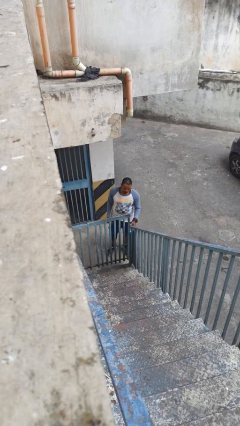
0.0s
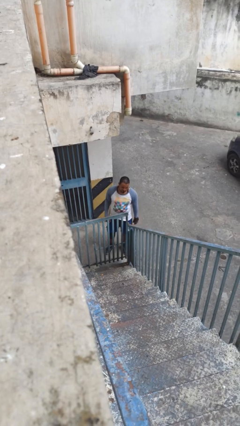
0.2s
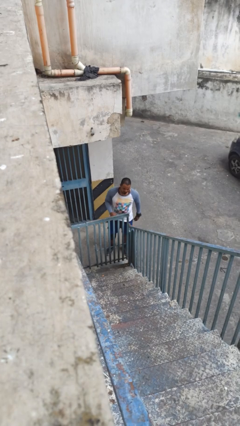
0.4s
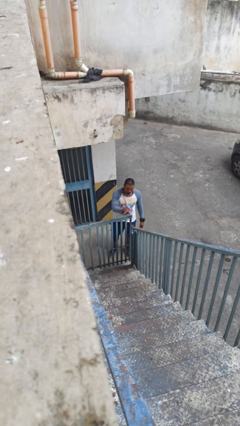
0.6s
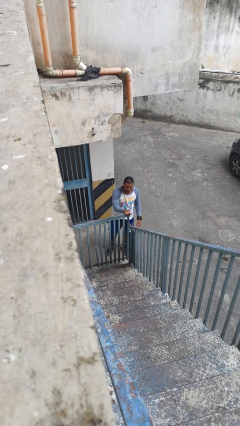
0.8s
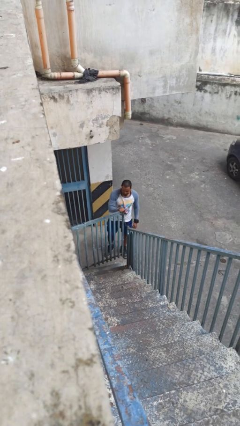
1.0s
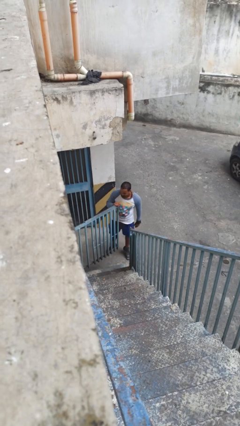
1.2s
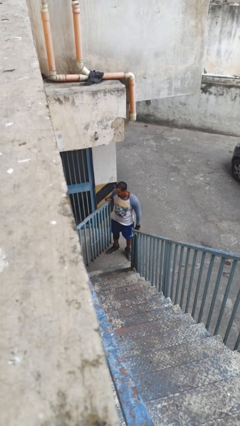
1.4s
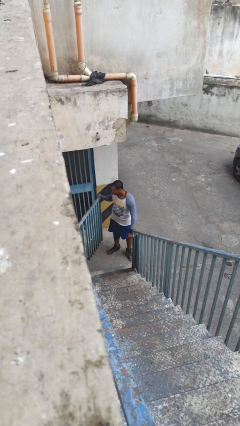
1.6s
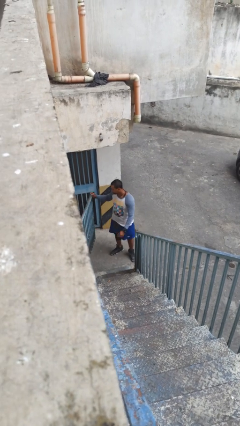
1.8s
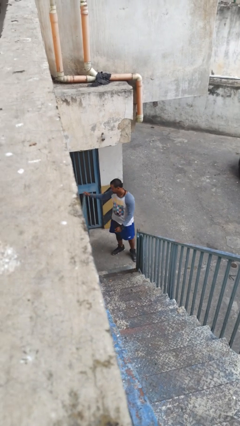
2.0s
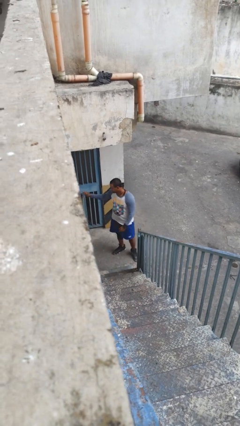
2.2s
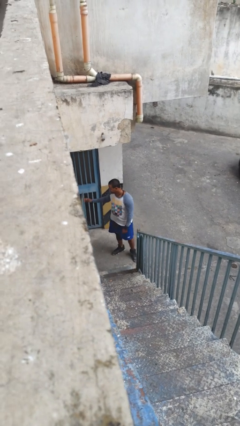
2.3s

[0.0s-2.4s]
person opens facility door

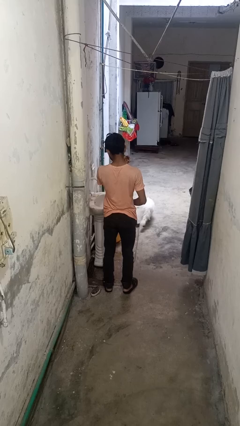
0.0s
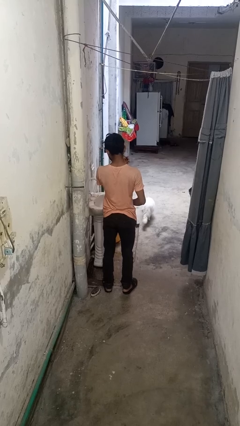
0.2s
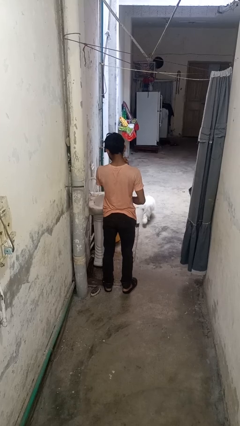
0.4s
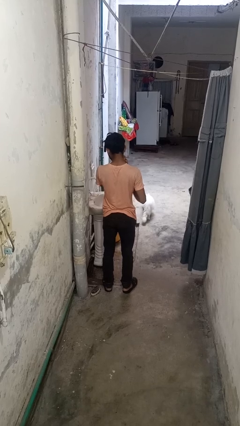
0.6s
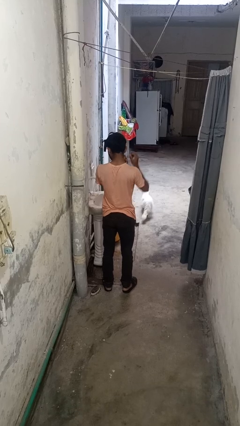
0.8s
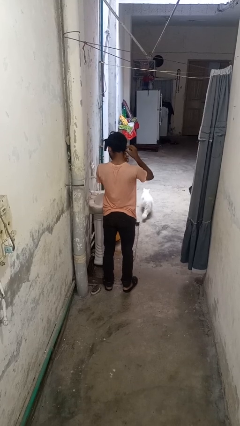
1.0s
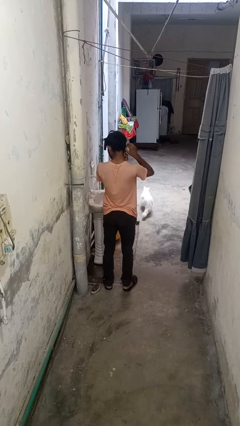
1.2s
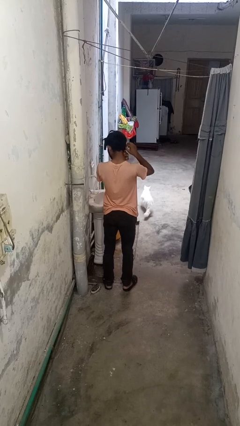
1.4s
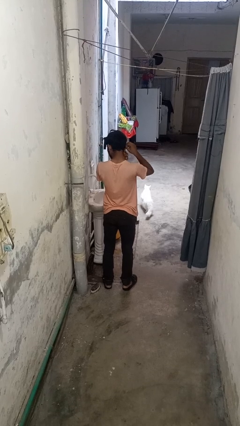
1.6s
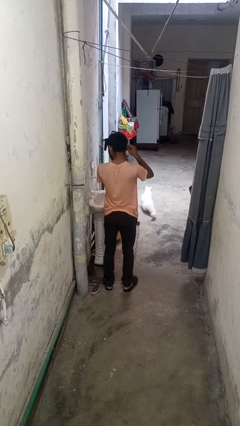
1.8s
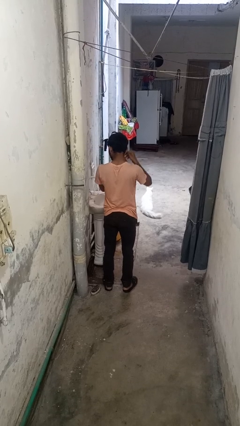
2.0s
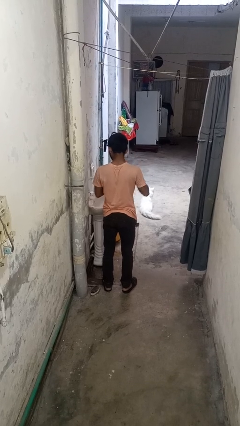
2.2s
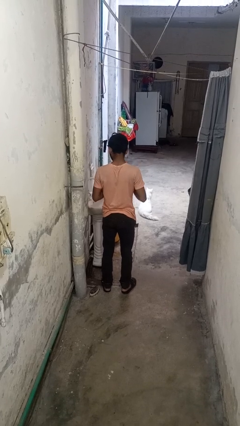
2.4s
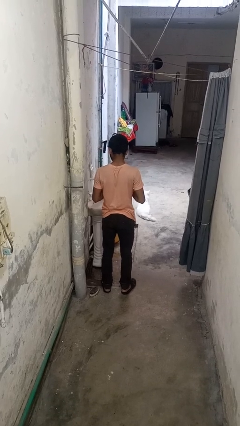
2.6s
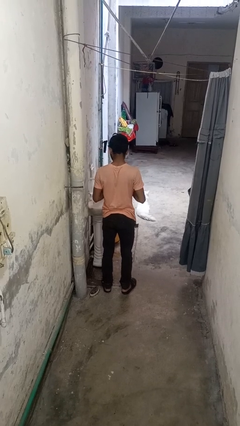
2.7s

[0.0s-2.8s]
person takes off earrings

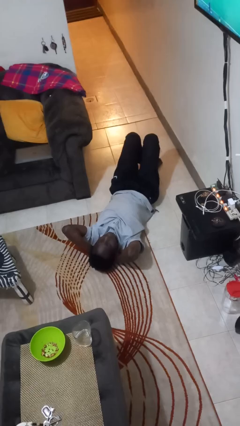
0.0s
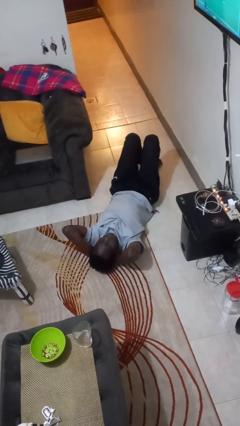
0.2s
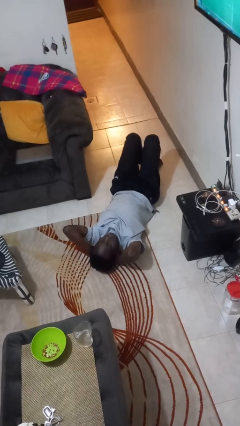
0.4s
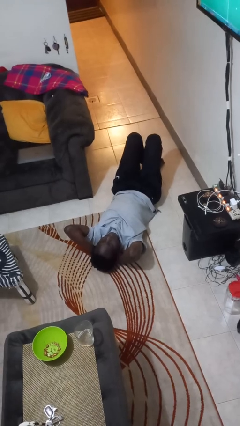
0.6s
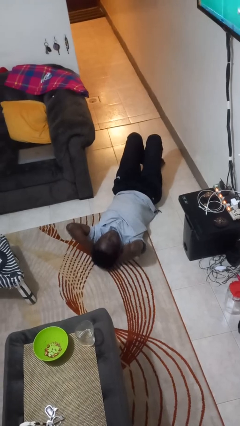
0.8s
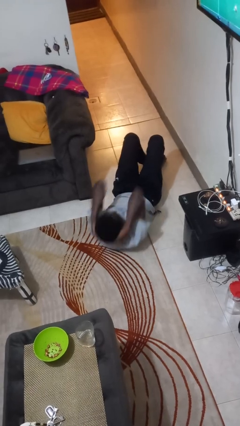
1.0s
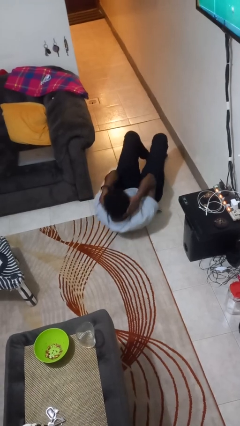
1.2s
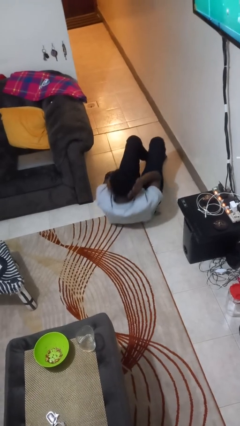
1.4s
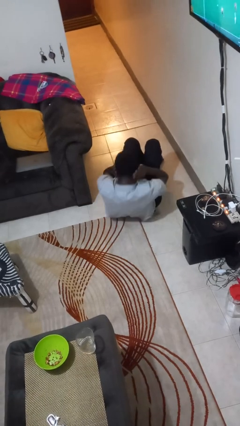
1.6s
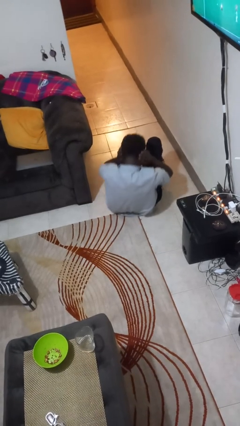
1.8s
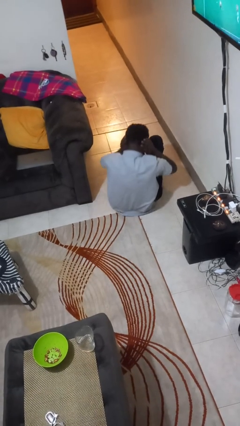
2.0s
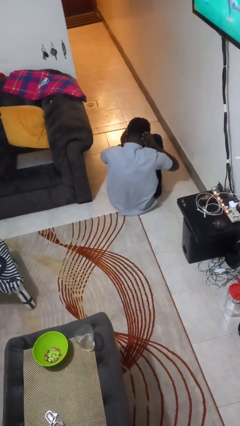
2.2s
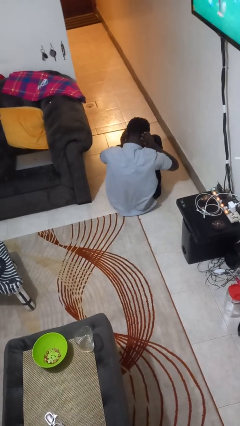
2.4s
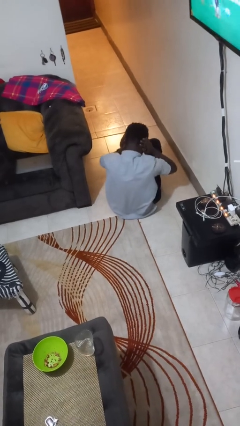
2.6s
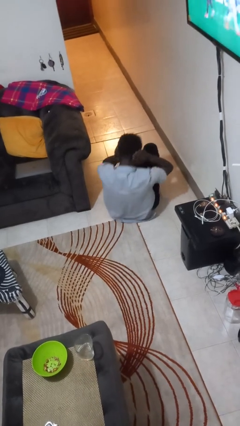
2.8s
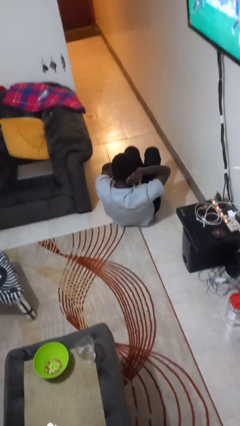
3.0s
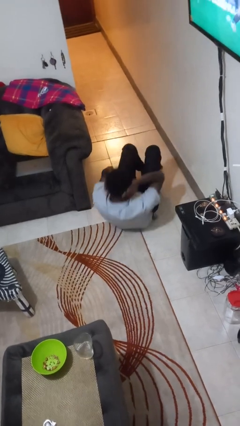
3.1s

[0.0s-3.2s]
person exercises with situp

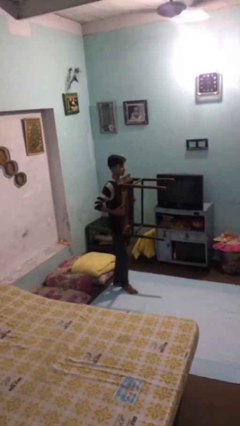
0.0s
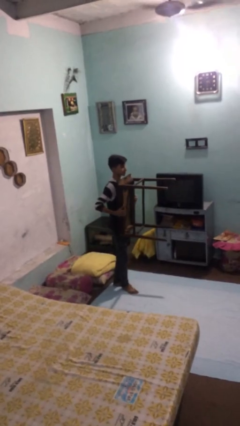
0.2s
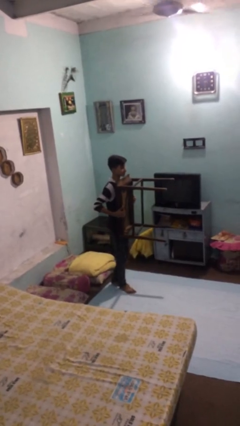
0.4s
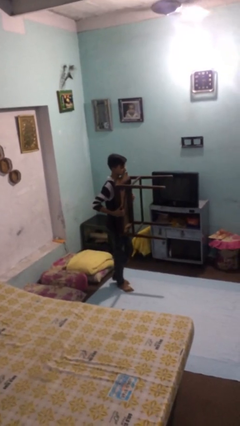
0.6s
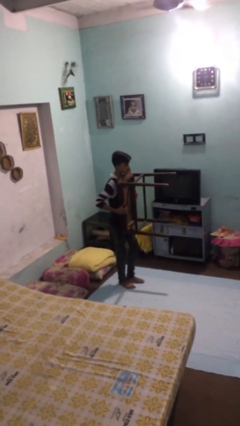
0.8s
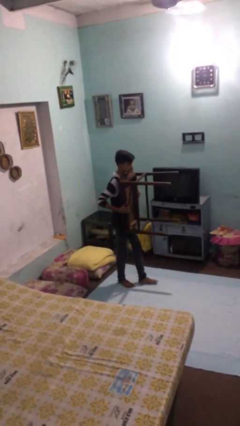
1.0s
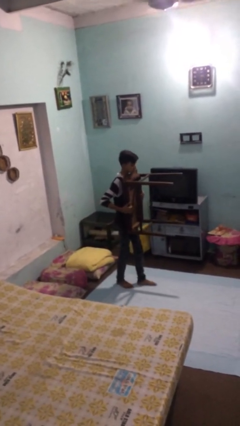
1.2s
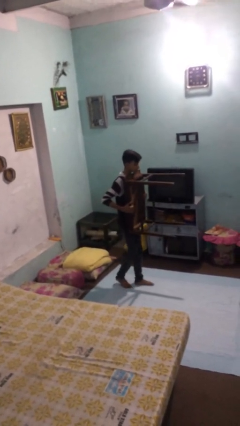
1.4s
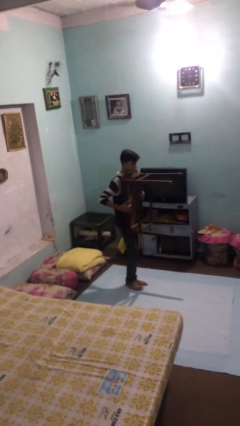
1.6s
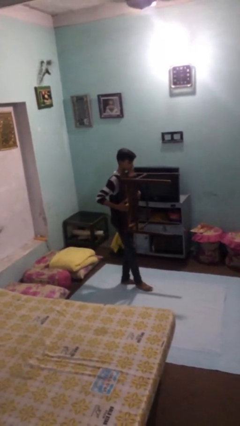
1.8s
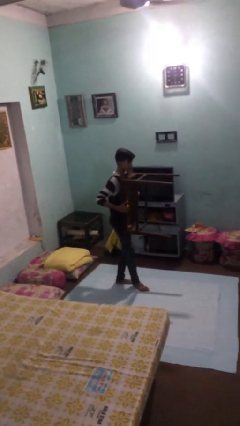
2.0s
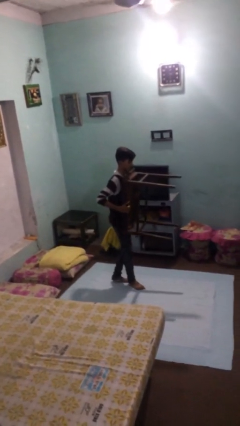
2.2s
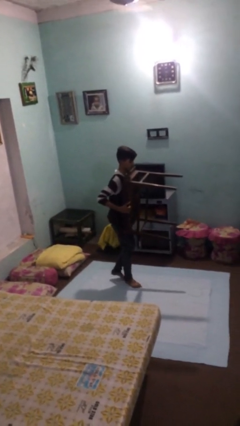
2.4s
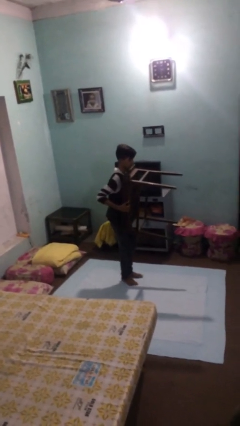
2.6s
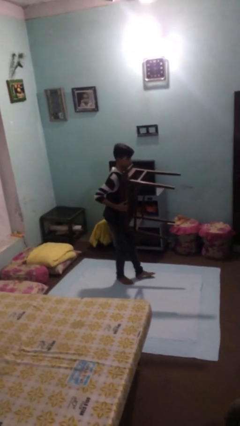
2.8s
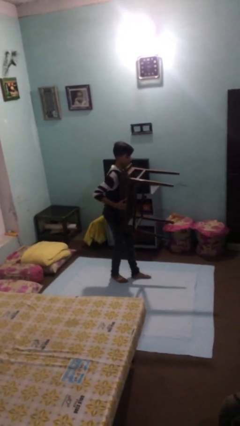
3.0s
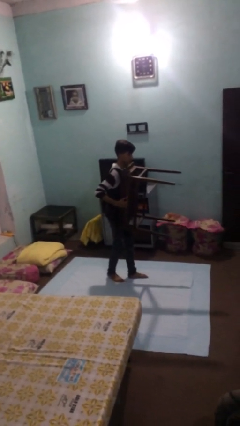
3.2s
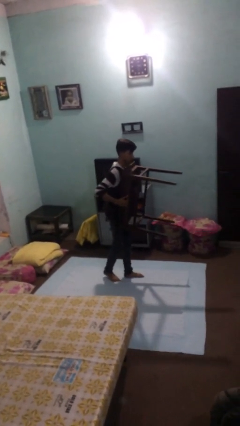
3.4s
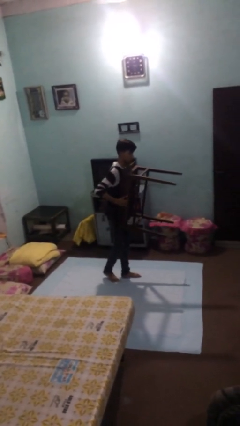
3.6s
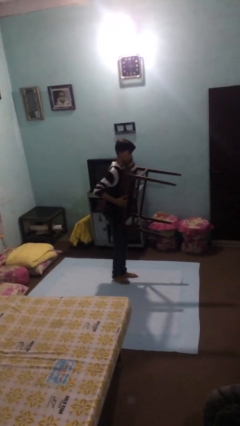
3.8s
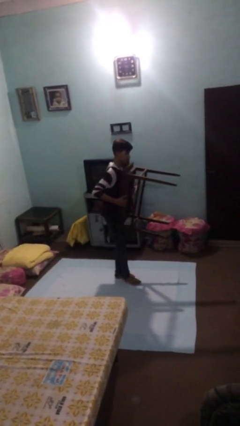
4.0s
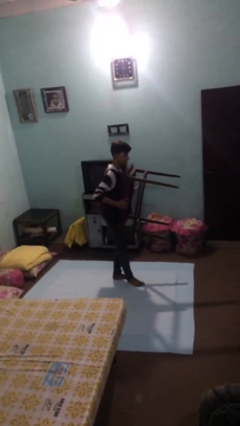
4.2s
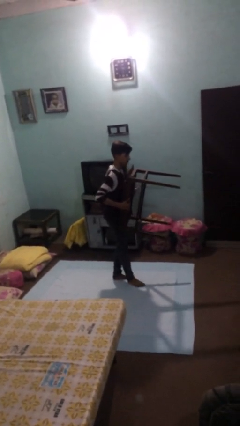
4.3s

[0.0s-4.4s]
person carries heavy object

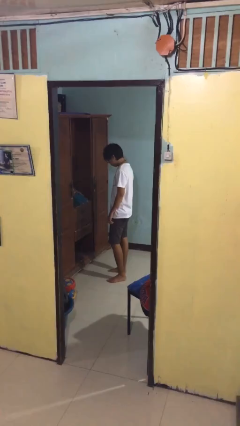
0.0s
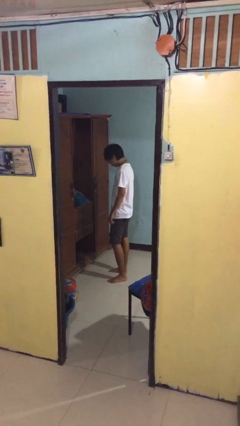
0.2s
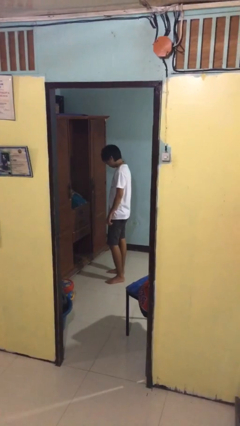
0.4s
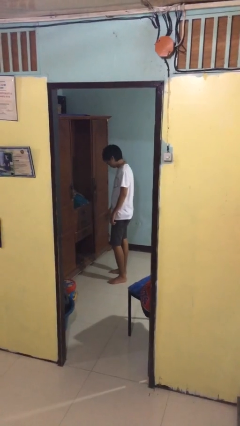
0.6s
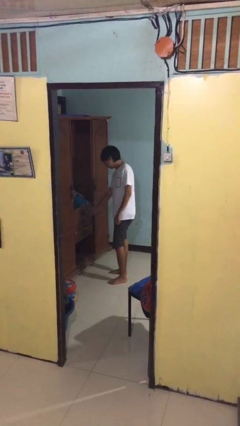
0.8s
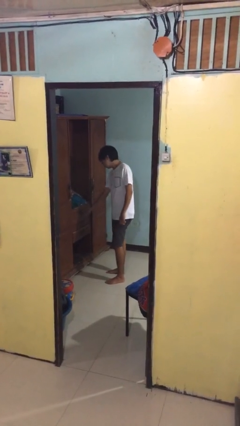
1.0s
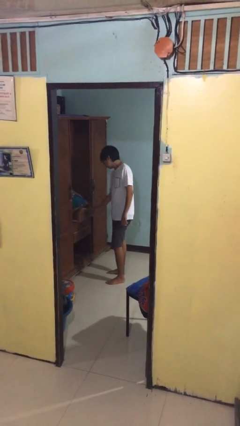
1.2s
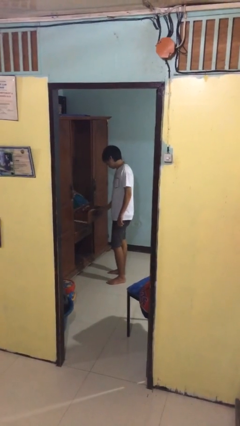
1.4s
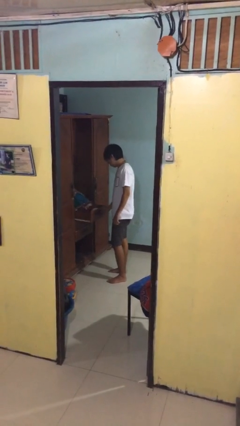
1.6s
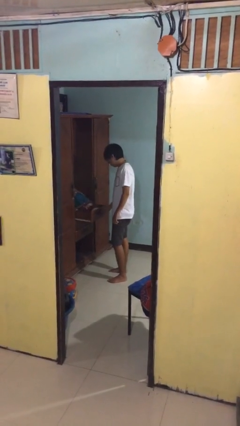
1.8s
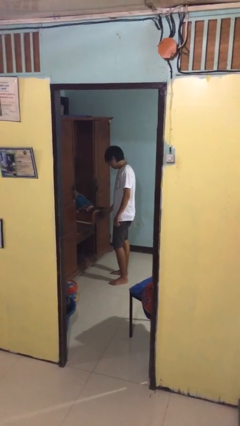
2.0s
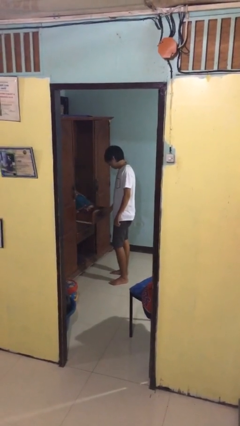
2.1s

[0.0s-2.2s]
person opens dresser drawer

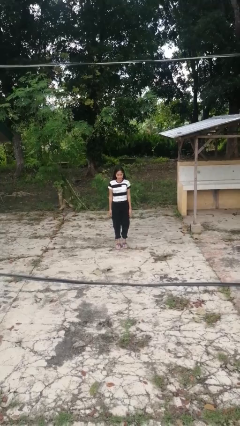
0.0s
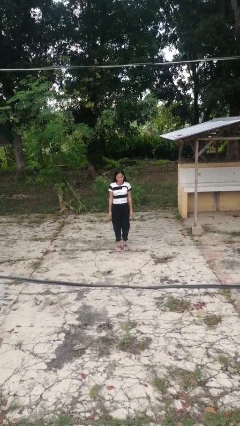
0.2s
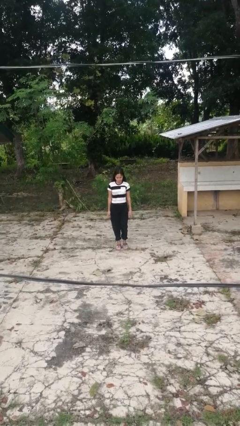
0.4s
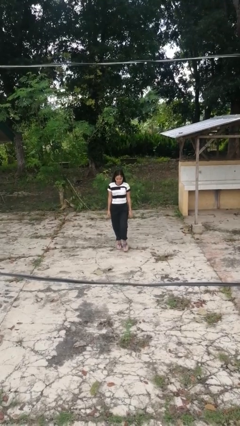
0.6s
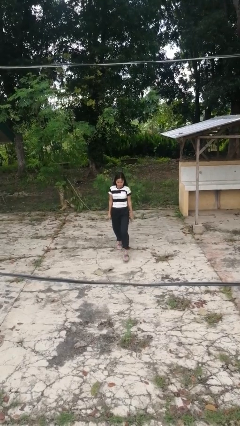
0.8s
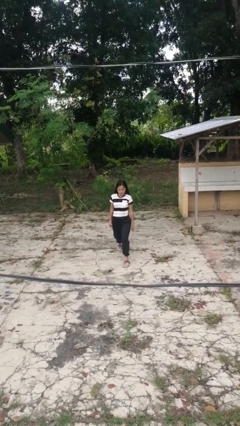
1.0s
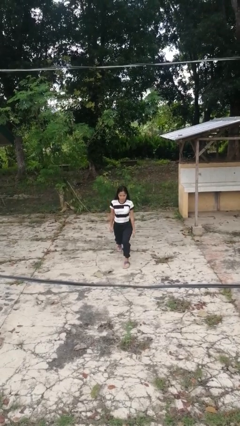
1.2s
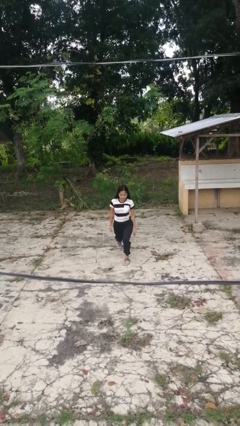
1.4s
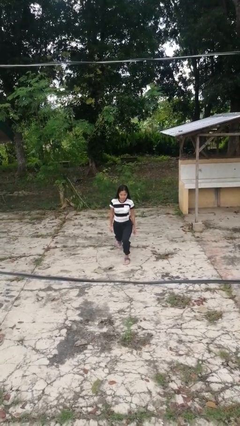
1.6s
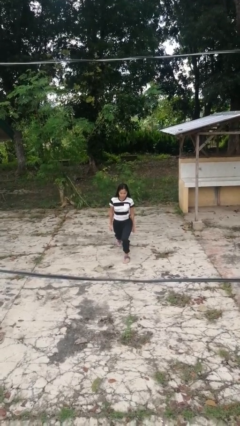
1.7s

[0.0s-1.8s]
person exercises with lunges

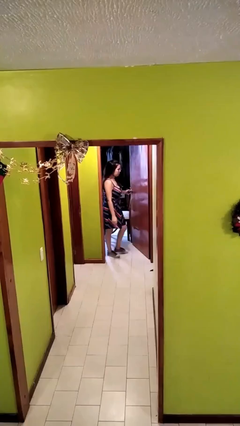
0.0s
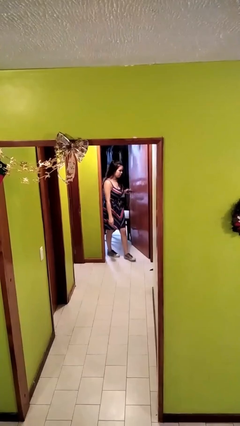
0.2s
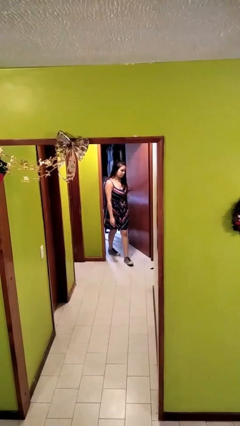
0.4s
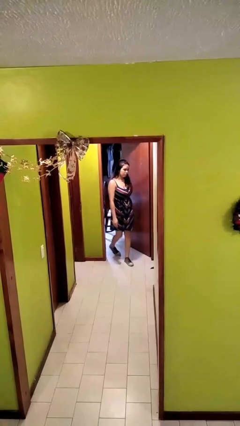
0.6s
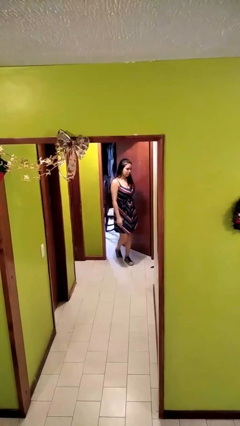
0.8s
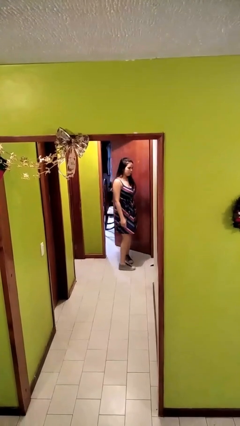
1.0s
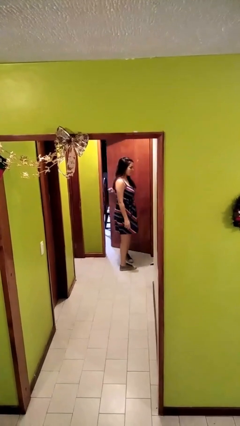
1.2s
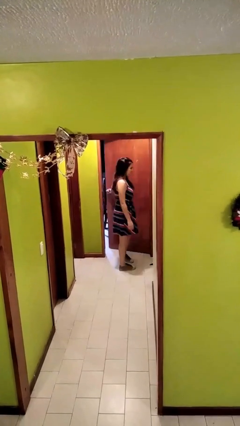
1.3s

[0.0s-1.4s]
person closes facility door
